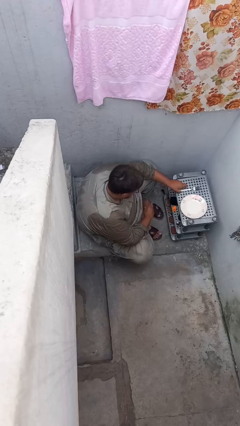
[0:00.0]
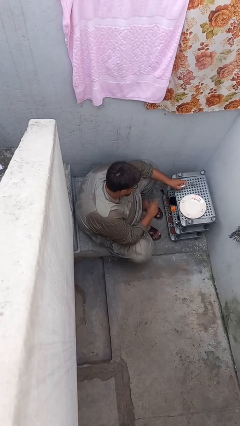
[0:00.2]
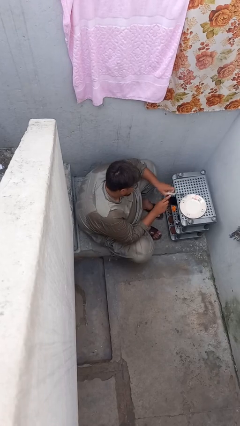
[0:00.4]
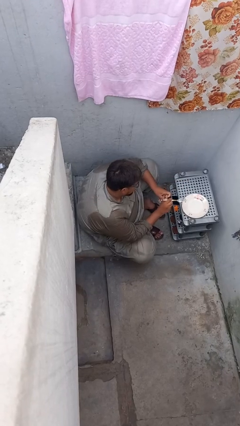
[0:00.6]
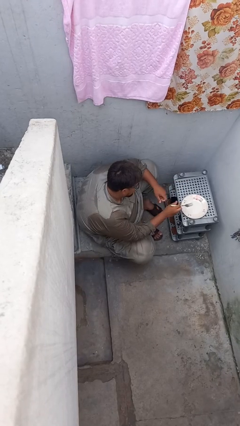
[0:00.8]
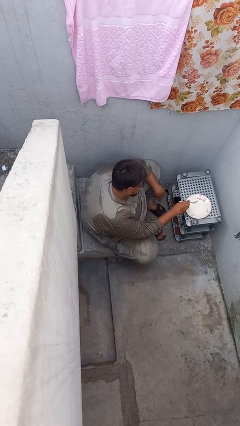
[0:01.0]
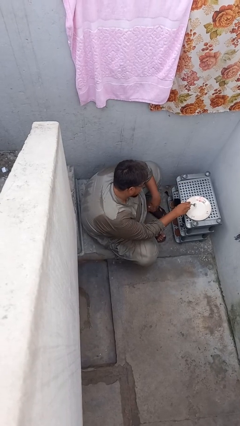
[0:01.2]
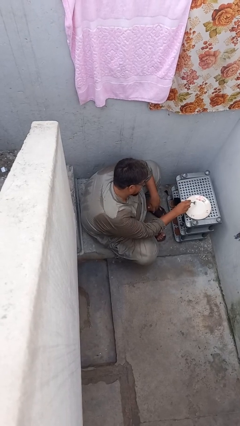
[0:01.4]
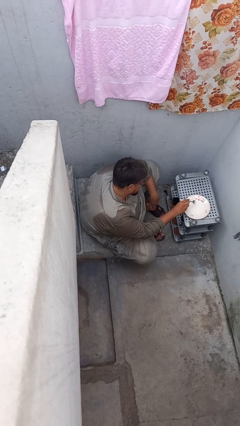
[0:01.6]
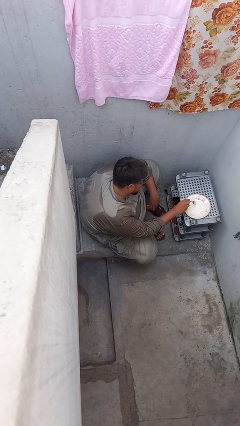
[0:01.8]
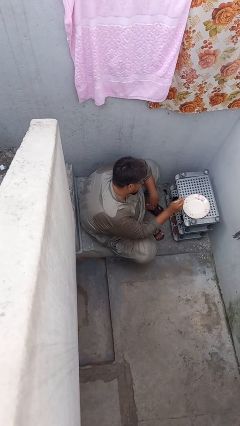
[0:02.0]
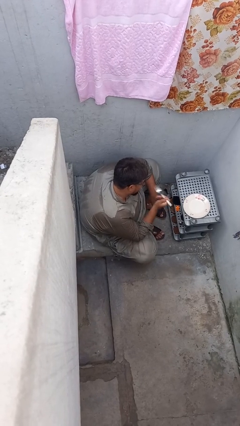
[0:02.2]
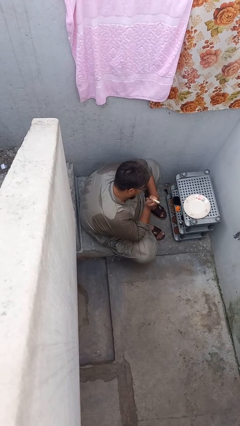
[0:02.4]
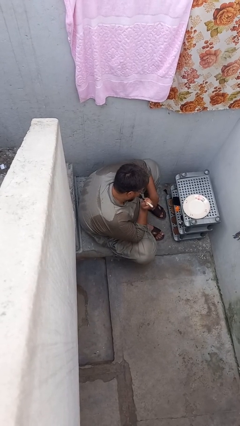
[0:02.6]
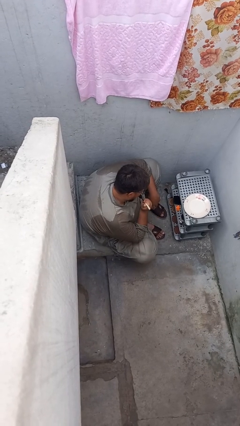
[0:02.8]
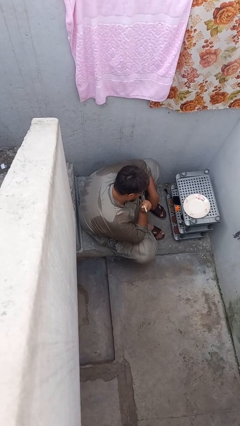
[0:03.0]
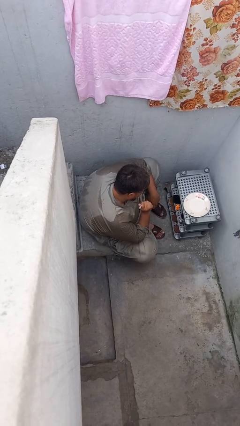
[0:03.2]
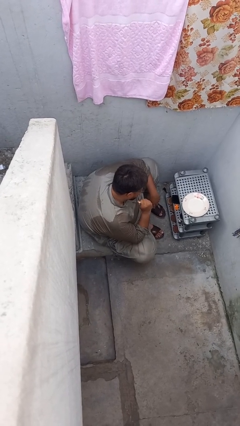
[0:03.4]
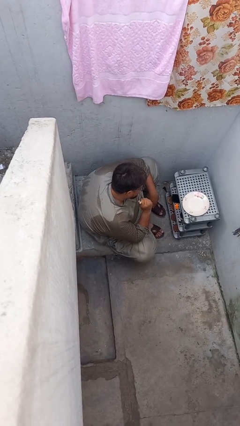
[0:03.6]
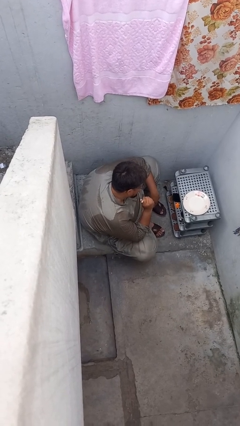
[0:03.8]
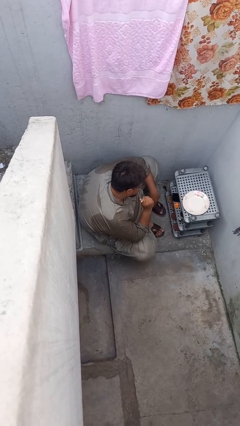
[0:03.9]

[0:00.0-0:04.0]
person eats with utensil

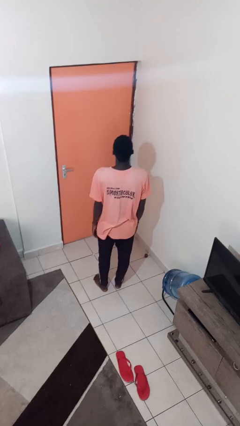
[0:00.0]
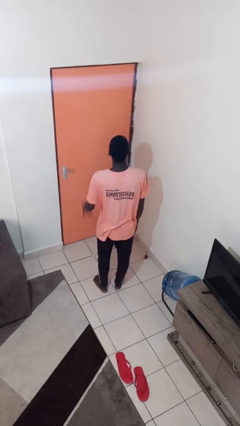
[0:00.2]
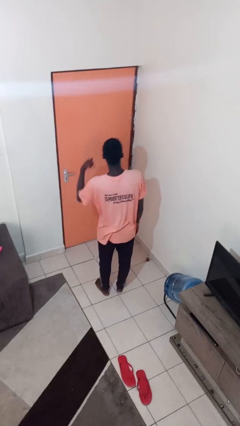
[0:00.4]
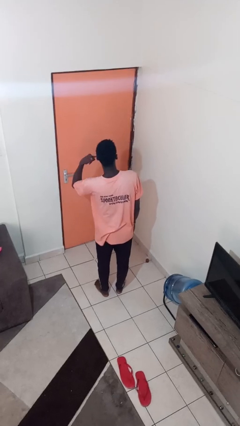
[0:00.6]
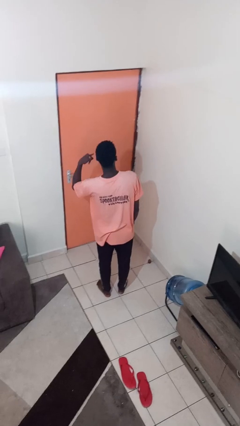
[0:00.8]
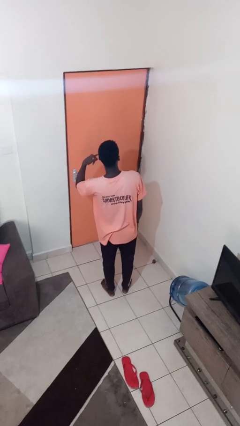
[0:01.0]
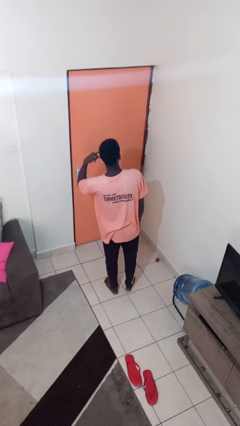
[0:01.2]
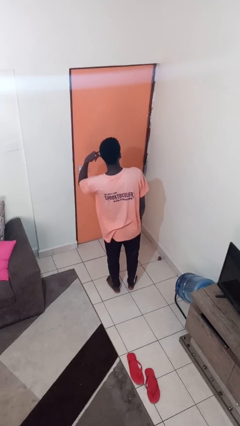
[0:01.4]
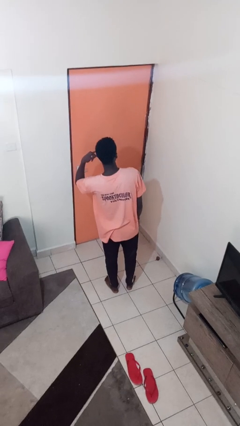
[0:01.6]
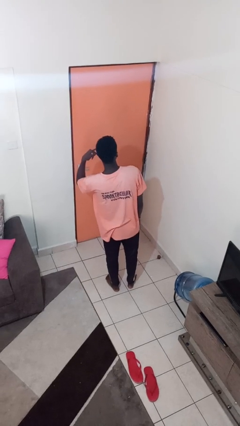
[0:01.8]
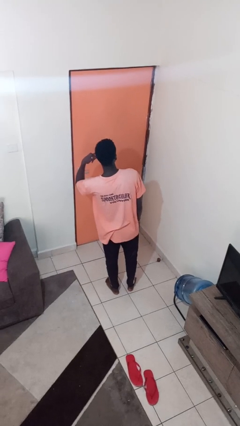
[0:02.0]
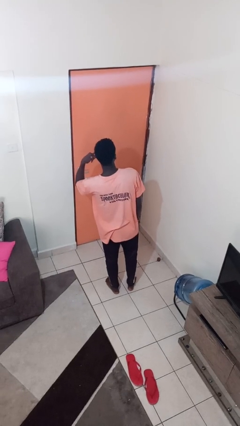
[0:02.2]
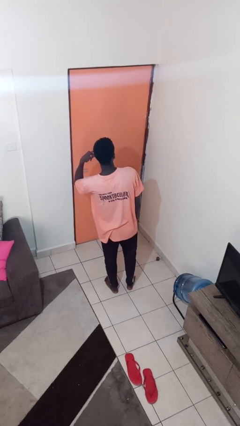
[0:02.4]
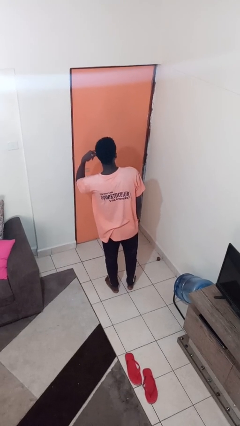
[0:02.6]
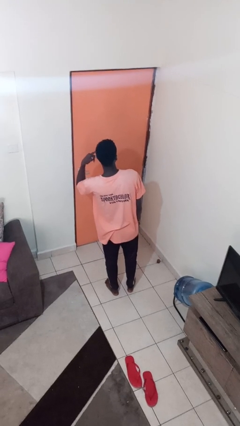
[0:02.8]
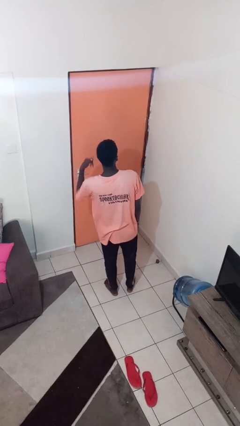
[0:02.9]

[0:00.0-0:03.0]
person gestures call me

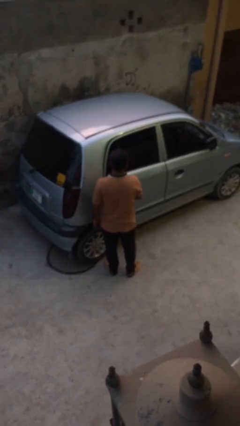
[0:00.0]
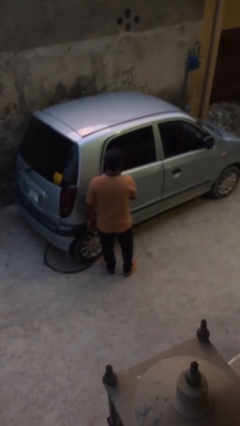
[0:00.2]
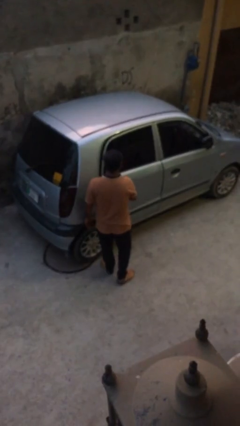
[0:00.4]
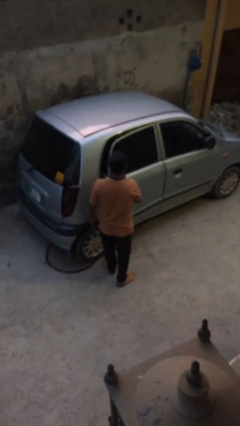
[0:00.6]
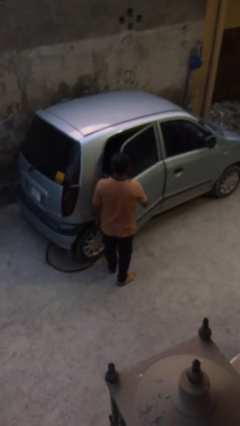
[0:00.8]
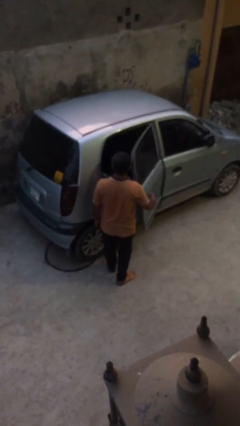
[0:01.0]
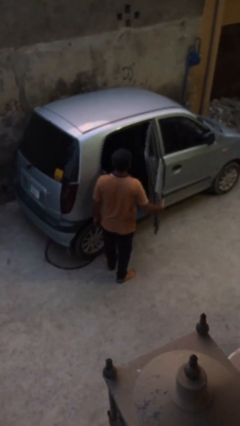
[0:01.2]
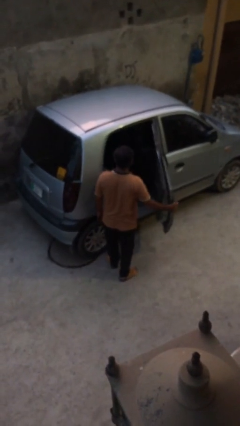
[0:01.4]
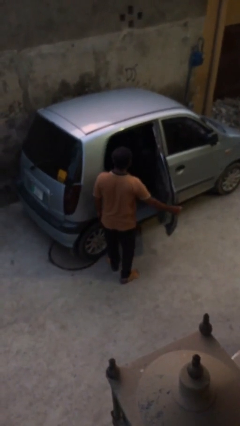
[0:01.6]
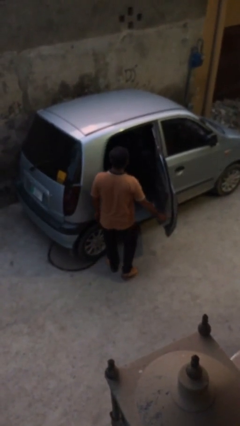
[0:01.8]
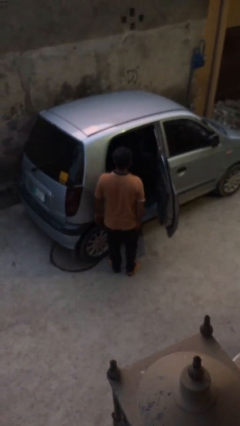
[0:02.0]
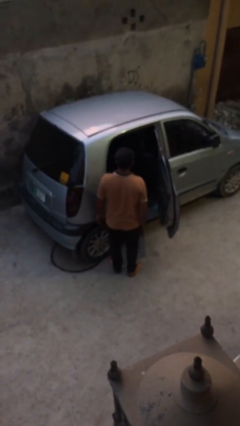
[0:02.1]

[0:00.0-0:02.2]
person opens car door

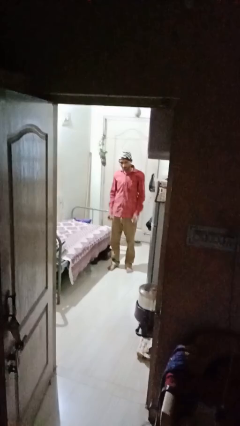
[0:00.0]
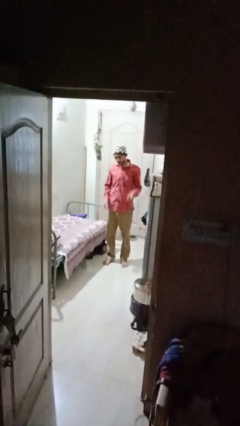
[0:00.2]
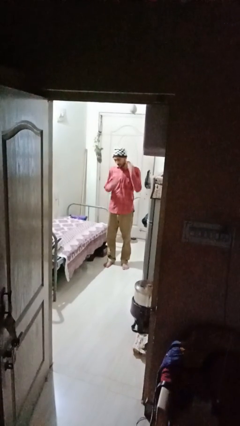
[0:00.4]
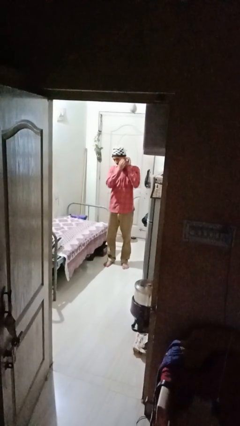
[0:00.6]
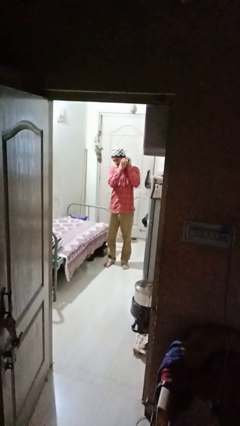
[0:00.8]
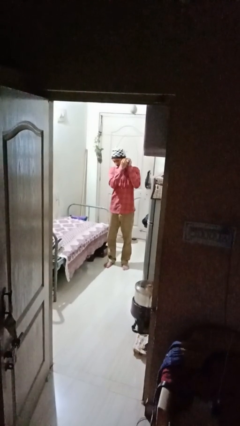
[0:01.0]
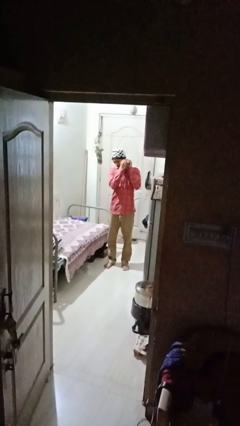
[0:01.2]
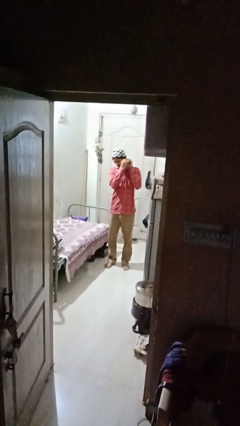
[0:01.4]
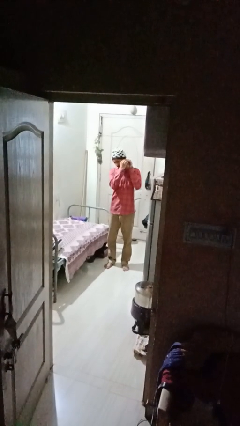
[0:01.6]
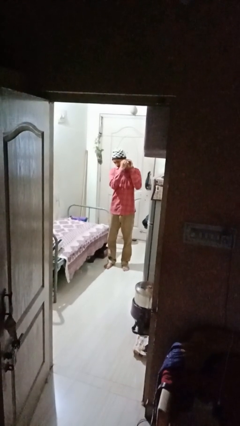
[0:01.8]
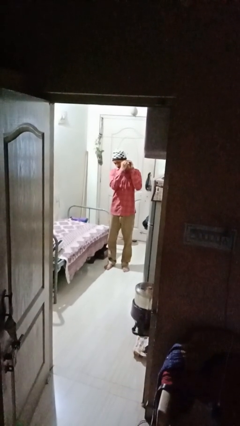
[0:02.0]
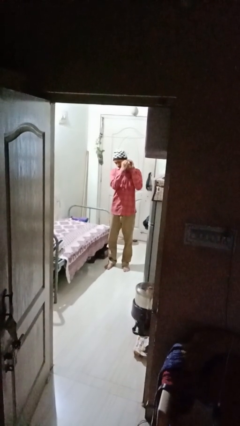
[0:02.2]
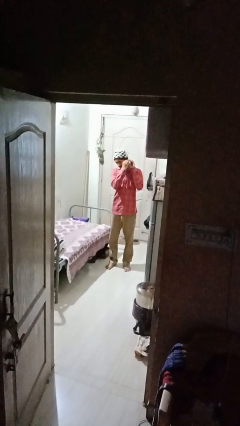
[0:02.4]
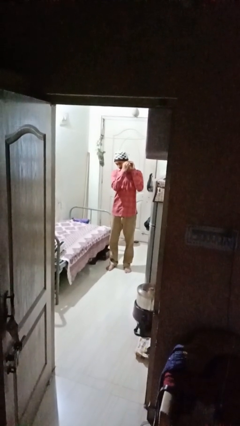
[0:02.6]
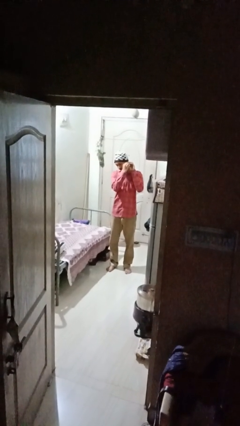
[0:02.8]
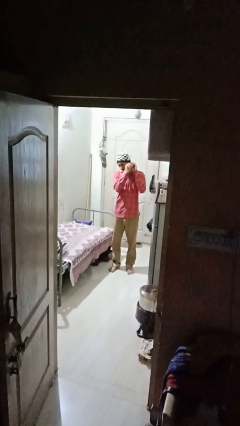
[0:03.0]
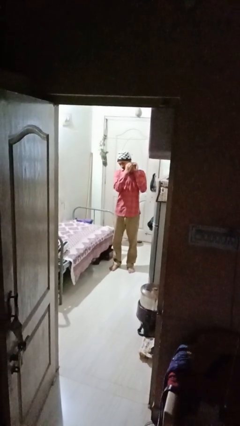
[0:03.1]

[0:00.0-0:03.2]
person puts on earrings

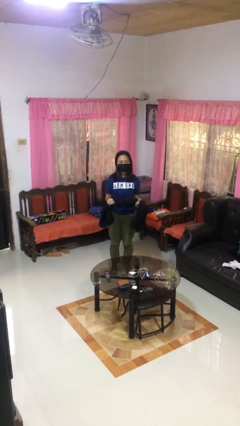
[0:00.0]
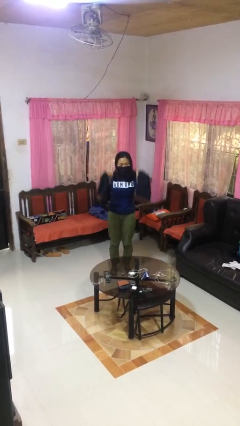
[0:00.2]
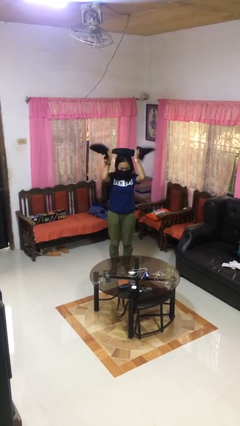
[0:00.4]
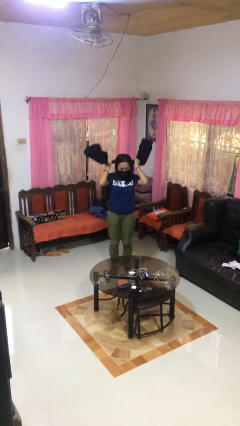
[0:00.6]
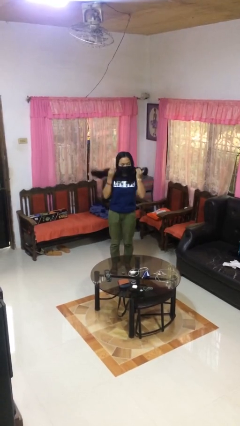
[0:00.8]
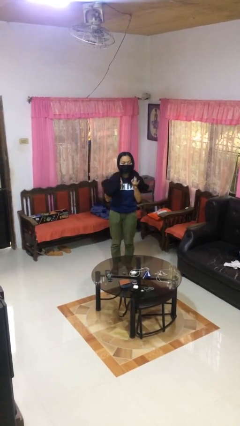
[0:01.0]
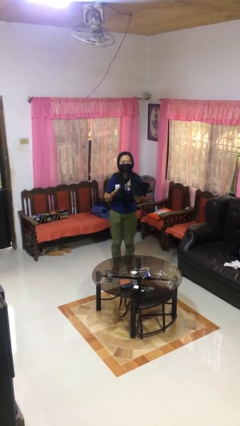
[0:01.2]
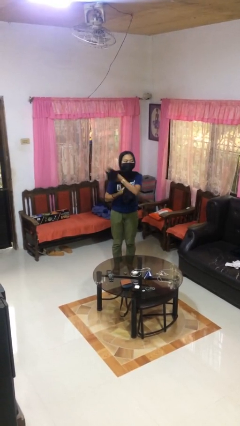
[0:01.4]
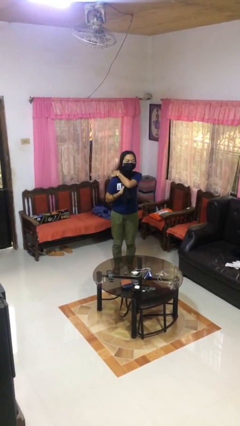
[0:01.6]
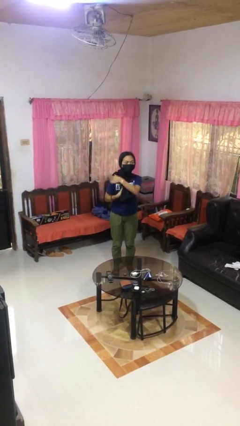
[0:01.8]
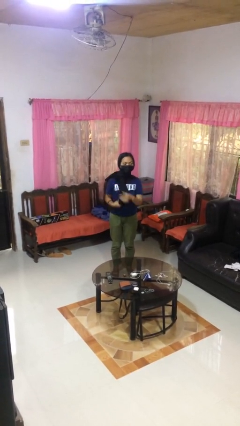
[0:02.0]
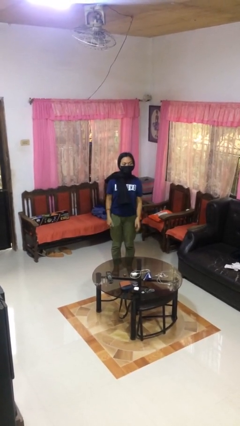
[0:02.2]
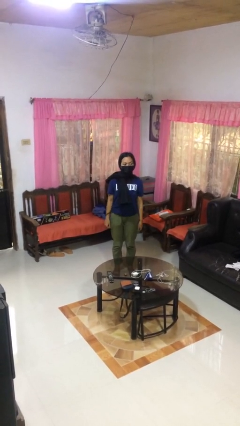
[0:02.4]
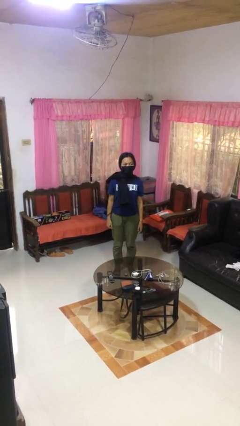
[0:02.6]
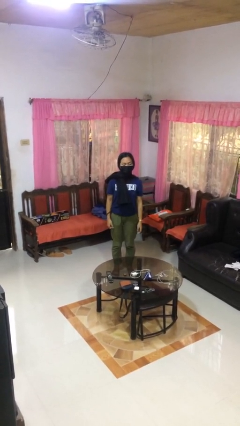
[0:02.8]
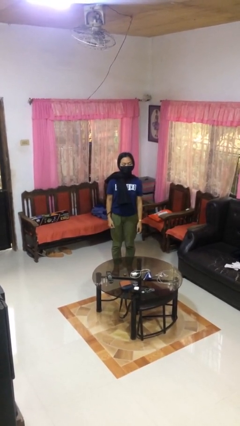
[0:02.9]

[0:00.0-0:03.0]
person puts on scarf

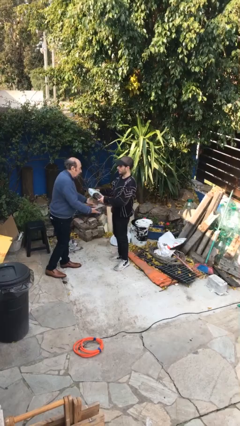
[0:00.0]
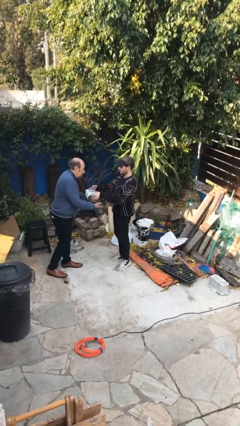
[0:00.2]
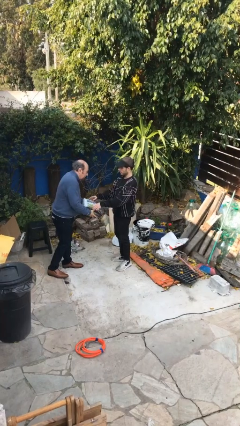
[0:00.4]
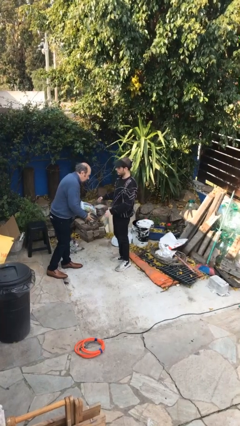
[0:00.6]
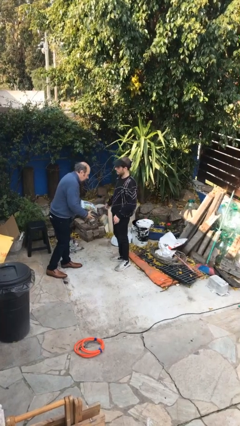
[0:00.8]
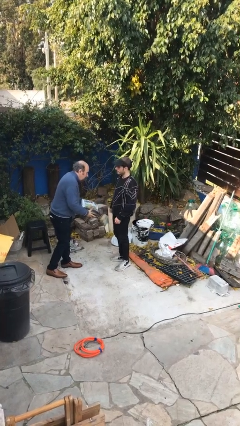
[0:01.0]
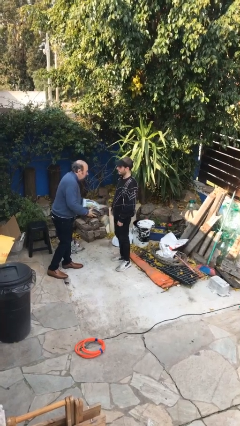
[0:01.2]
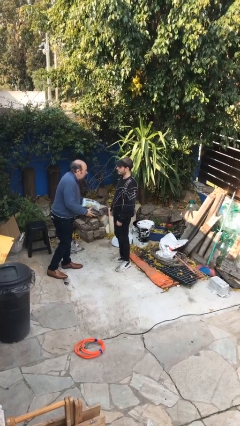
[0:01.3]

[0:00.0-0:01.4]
person transfers object to person

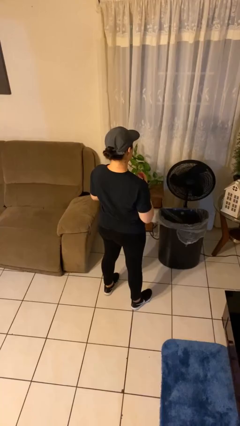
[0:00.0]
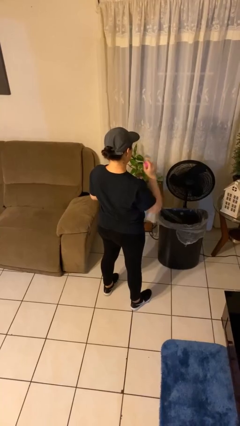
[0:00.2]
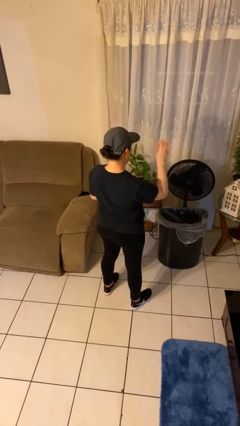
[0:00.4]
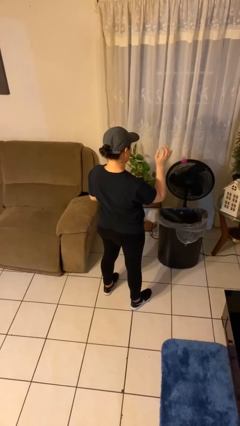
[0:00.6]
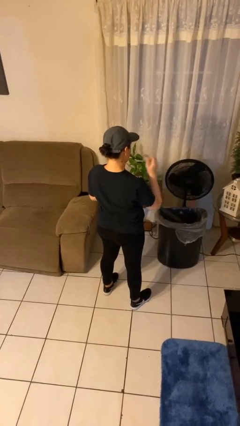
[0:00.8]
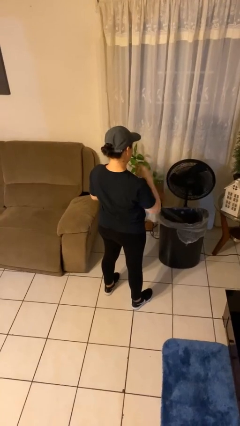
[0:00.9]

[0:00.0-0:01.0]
person discards trash
